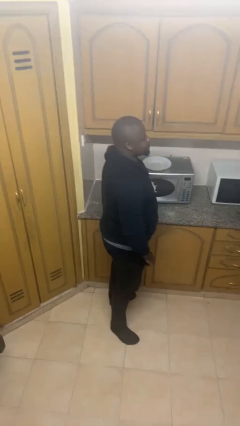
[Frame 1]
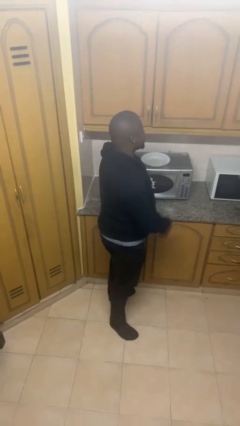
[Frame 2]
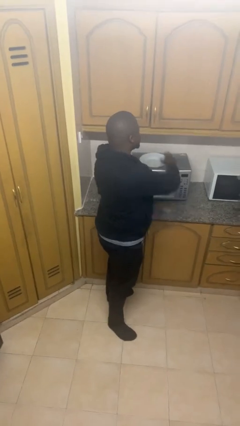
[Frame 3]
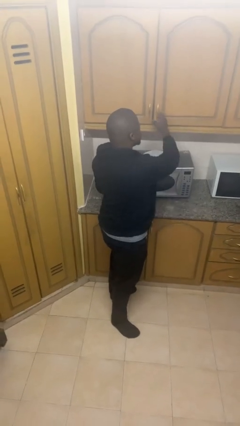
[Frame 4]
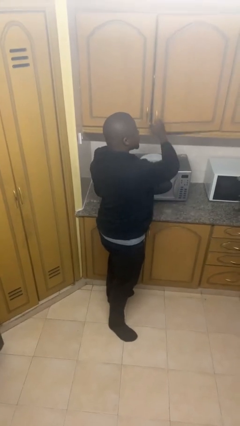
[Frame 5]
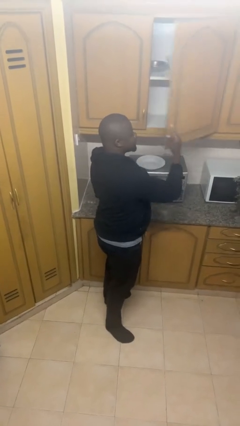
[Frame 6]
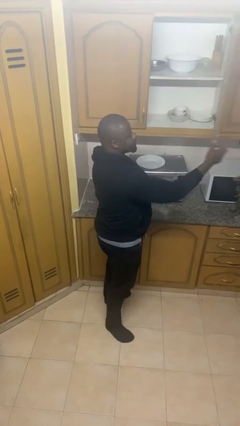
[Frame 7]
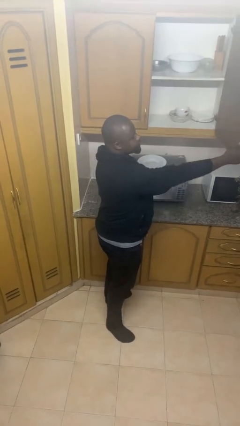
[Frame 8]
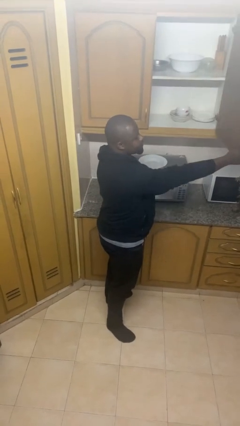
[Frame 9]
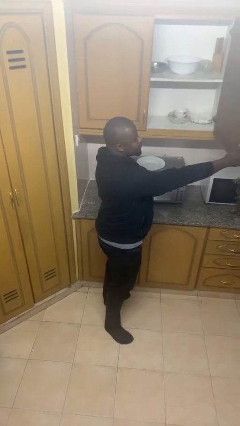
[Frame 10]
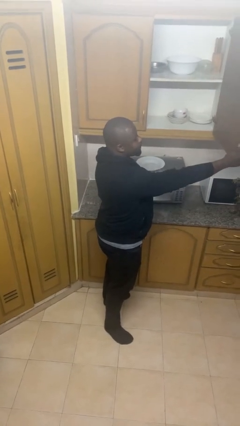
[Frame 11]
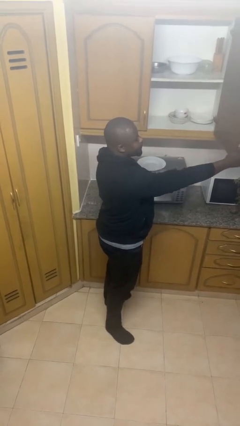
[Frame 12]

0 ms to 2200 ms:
person opens cabinet

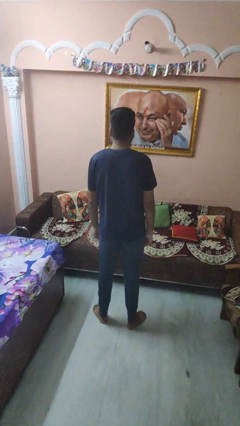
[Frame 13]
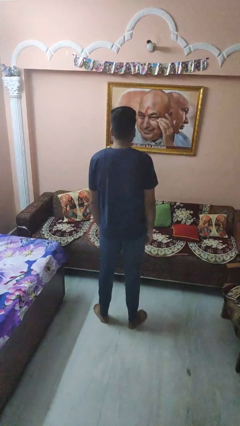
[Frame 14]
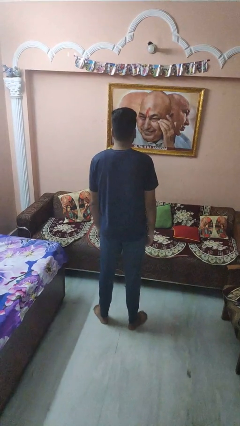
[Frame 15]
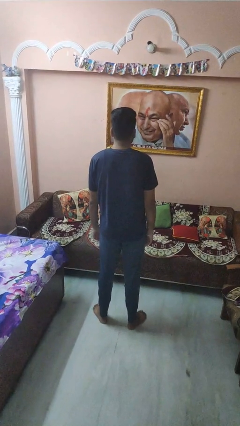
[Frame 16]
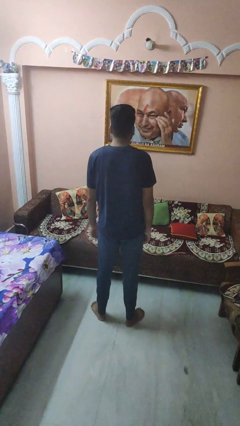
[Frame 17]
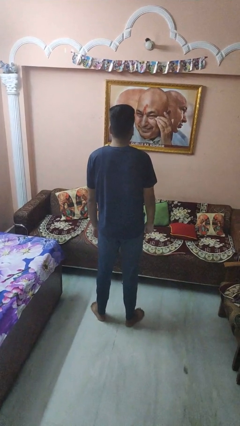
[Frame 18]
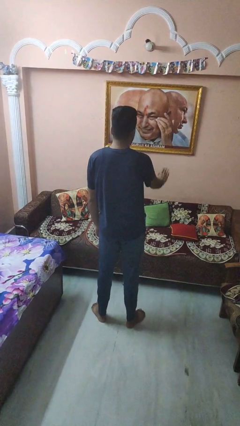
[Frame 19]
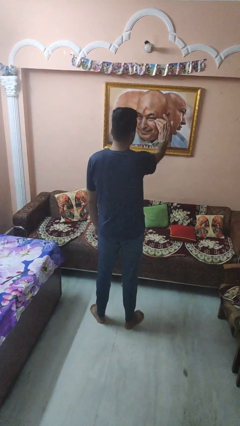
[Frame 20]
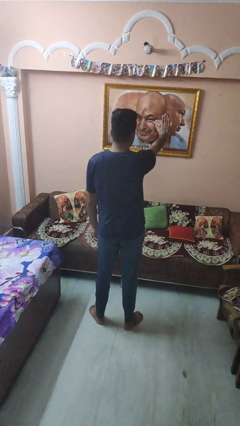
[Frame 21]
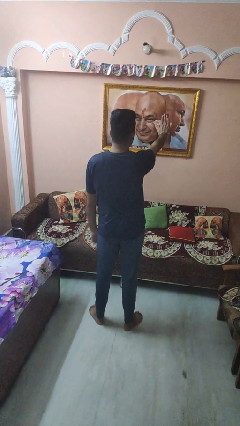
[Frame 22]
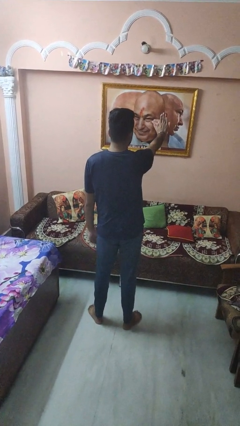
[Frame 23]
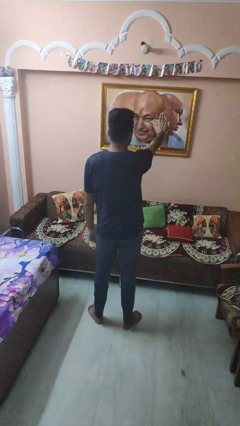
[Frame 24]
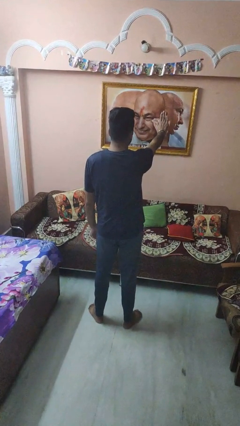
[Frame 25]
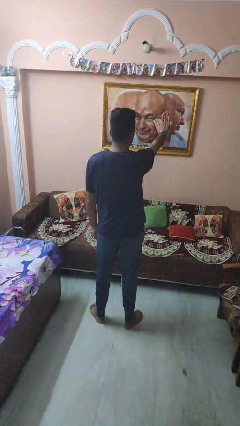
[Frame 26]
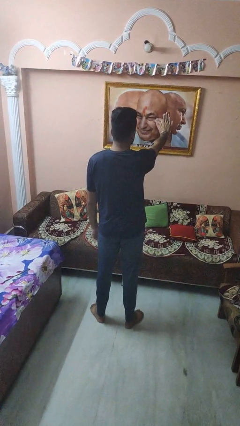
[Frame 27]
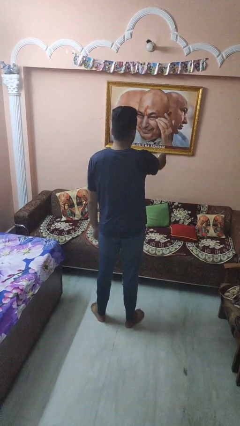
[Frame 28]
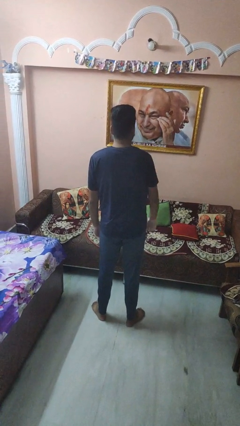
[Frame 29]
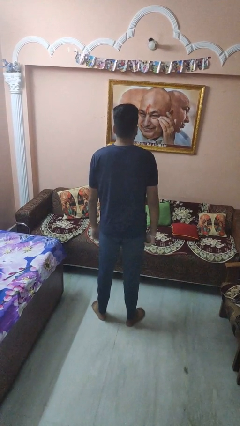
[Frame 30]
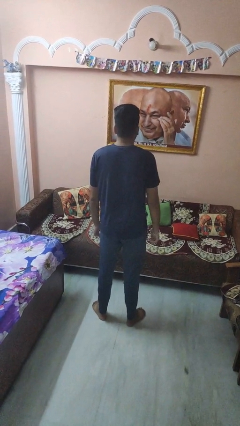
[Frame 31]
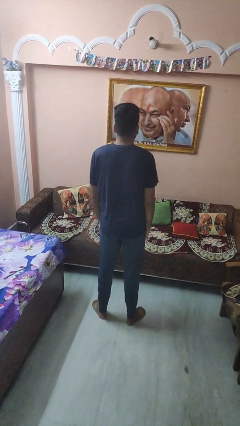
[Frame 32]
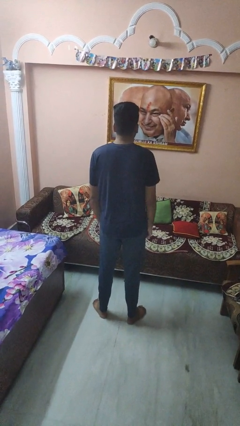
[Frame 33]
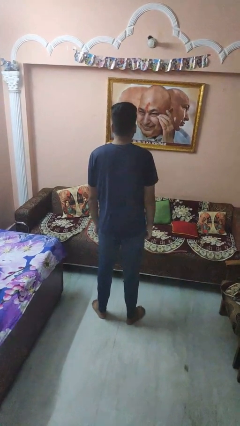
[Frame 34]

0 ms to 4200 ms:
person gestures stop

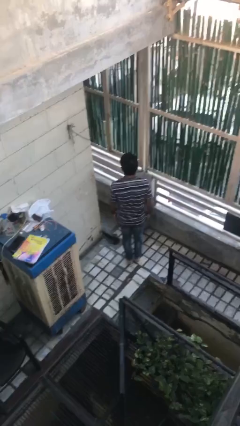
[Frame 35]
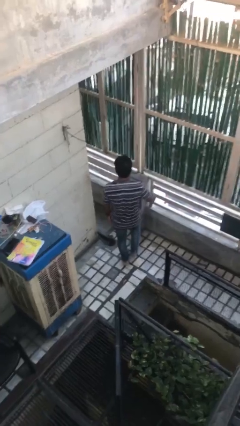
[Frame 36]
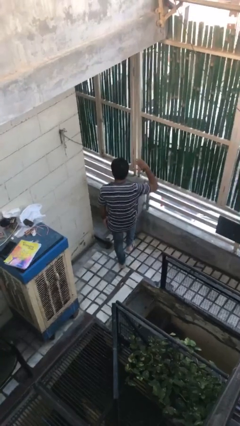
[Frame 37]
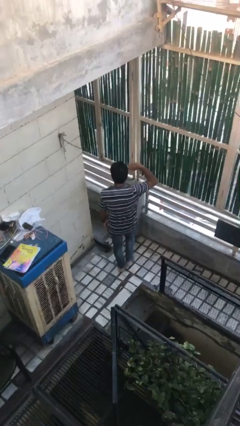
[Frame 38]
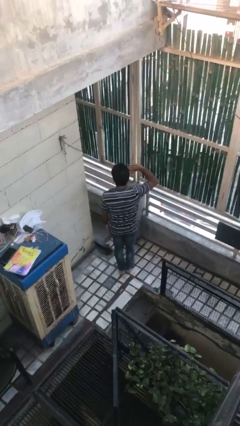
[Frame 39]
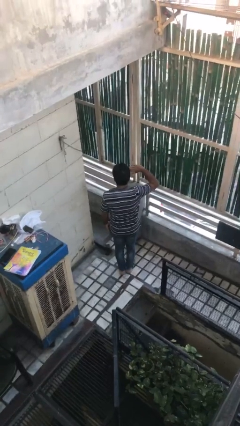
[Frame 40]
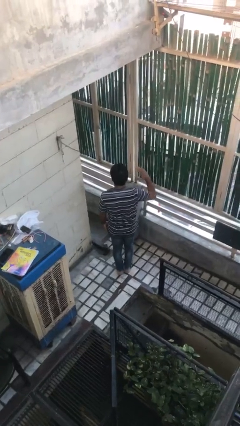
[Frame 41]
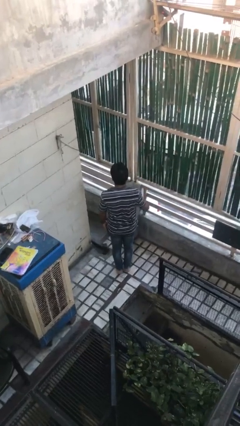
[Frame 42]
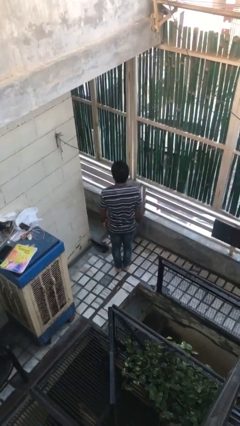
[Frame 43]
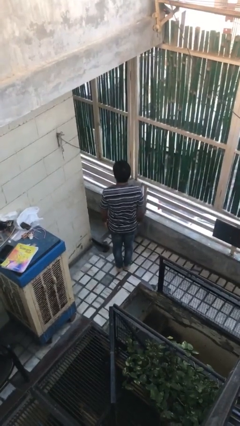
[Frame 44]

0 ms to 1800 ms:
person salutes

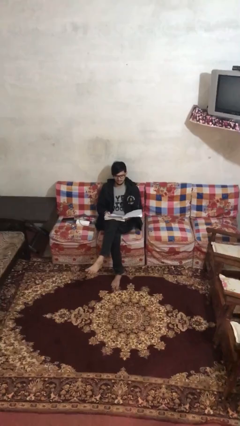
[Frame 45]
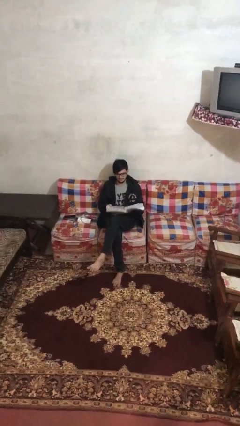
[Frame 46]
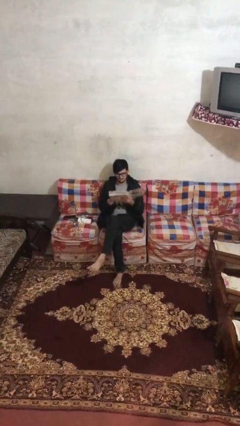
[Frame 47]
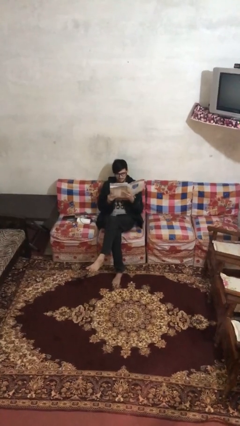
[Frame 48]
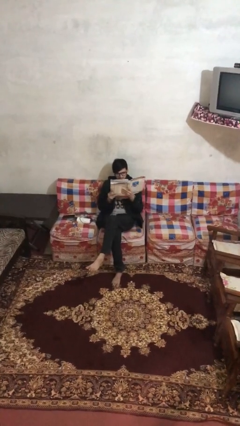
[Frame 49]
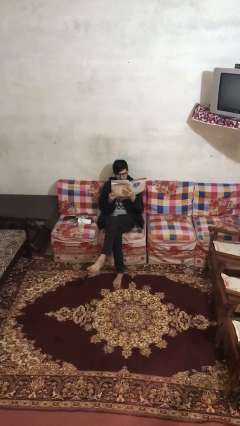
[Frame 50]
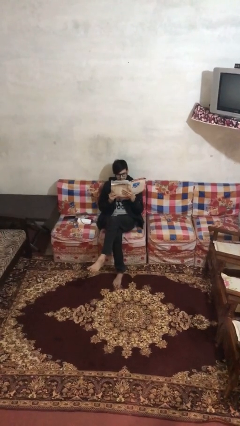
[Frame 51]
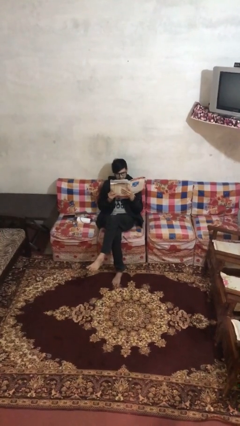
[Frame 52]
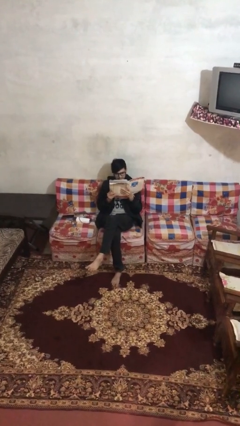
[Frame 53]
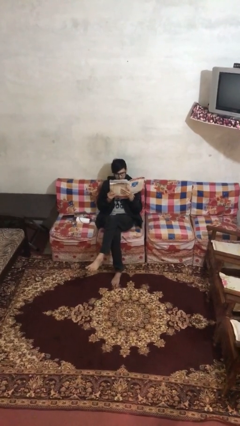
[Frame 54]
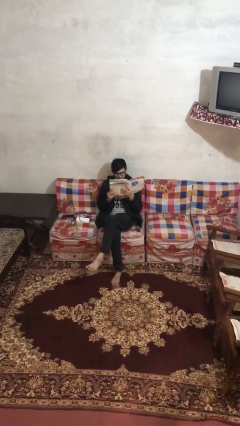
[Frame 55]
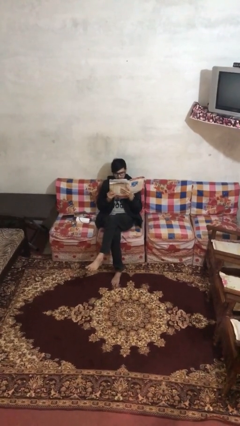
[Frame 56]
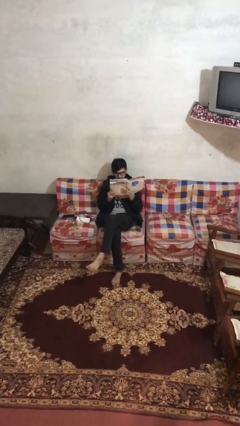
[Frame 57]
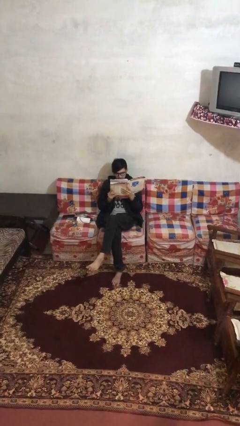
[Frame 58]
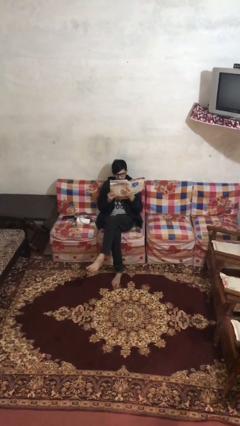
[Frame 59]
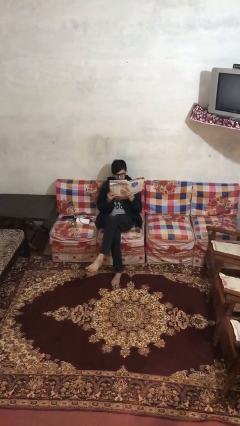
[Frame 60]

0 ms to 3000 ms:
person reads document

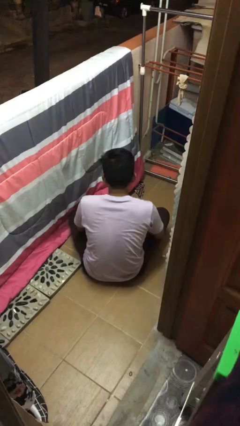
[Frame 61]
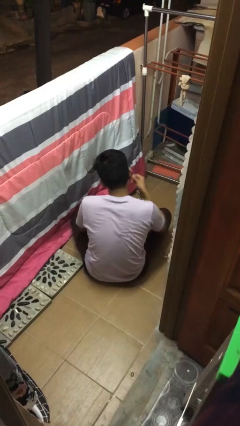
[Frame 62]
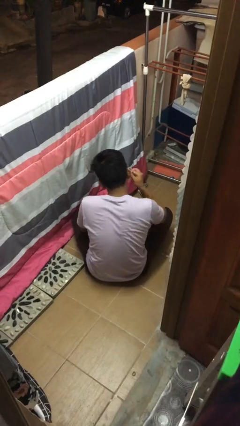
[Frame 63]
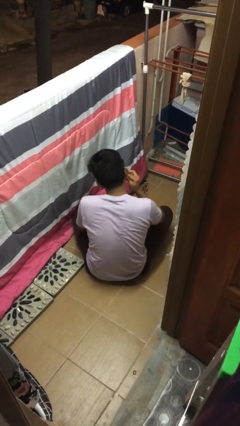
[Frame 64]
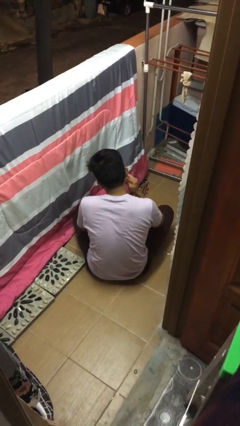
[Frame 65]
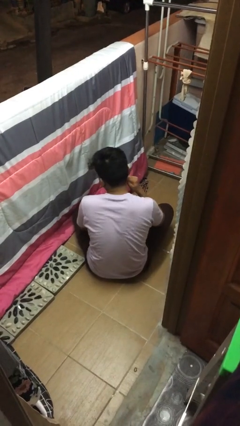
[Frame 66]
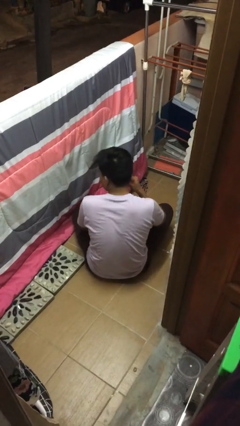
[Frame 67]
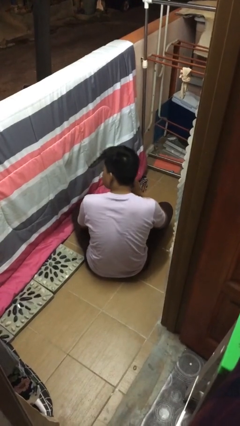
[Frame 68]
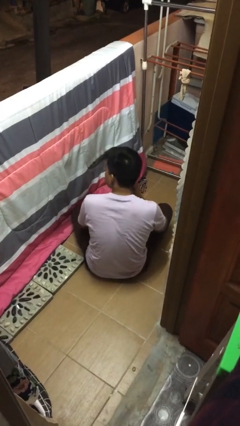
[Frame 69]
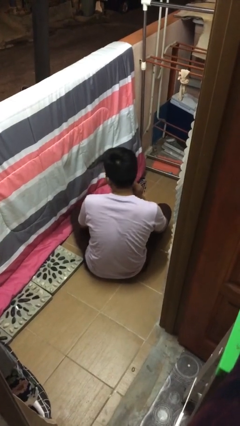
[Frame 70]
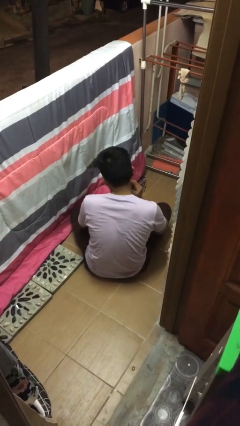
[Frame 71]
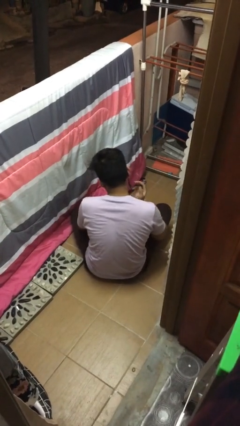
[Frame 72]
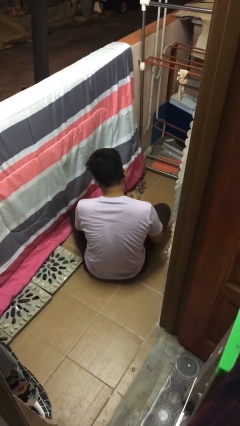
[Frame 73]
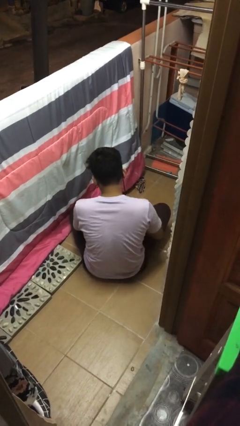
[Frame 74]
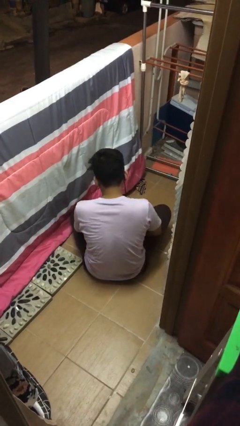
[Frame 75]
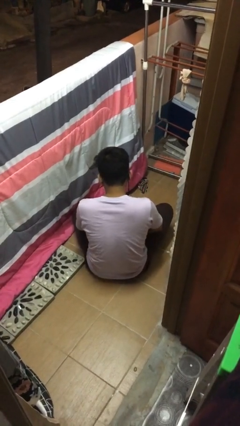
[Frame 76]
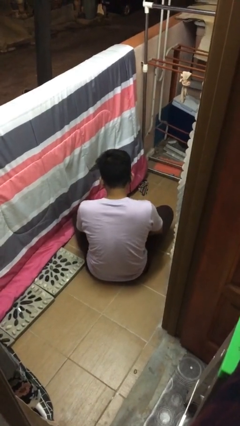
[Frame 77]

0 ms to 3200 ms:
person puts on earrings

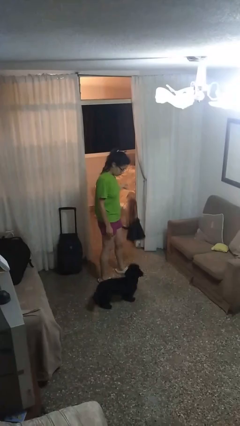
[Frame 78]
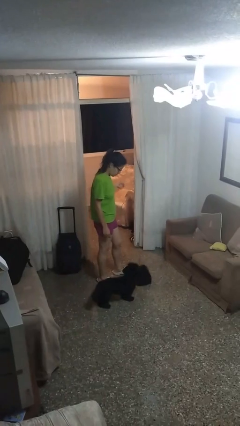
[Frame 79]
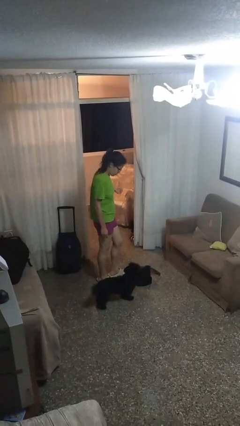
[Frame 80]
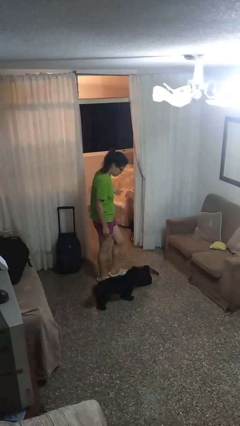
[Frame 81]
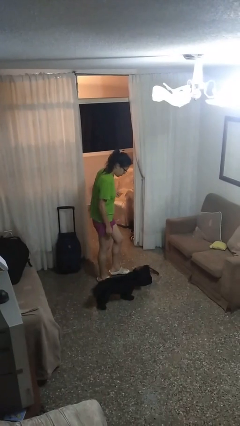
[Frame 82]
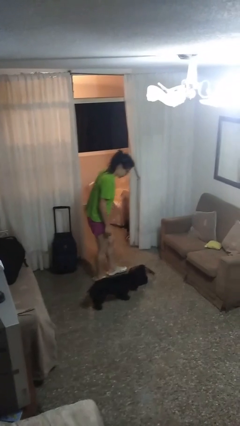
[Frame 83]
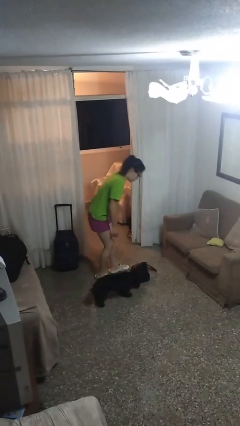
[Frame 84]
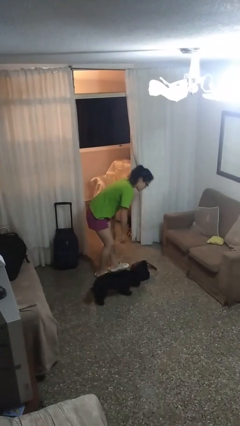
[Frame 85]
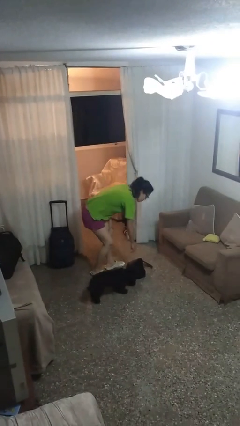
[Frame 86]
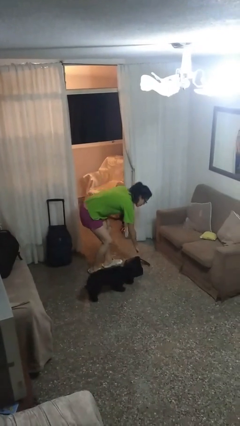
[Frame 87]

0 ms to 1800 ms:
person drops object

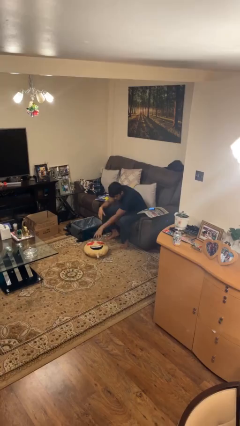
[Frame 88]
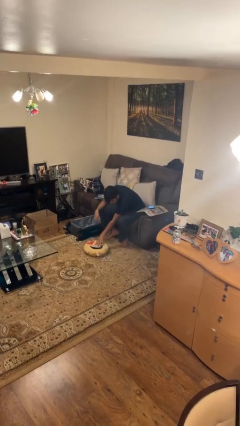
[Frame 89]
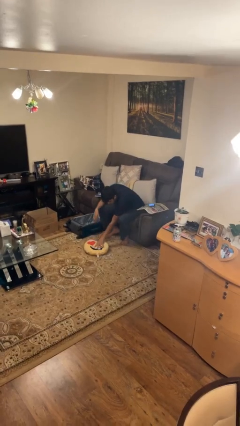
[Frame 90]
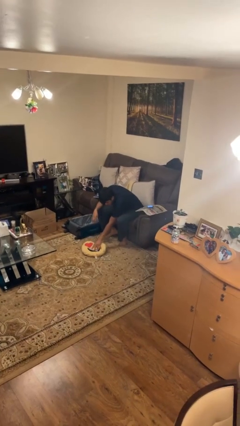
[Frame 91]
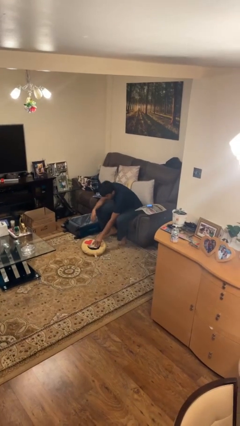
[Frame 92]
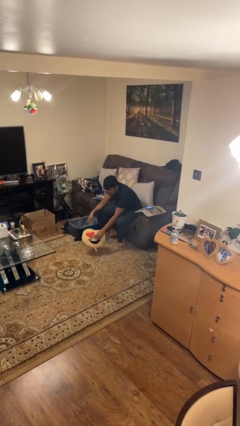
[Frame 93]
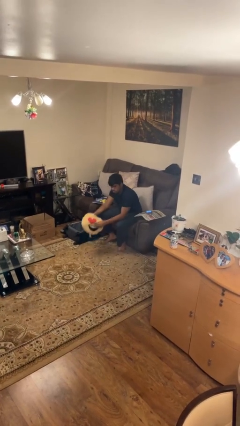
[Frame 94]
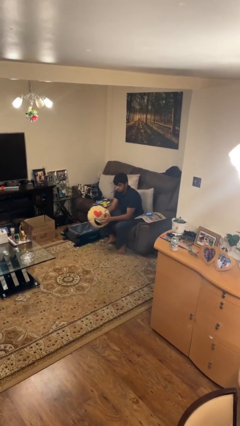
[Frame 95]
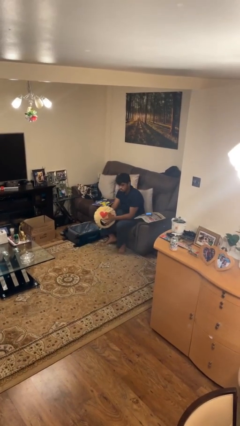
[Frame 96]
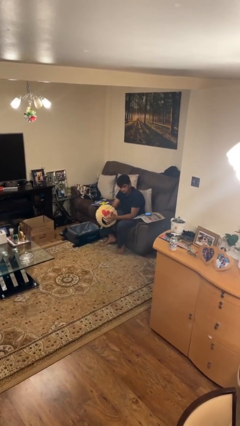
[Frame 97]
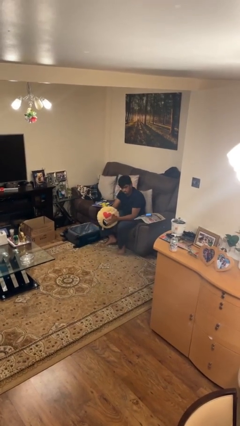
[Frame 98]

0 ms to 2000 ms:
person picks up object from floor
